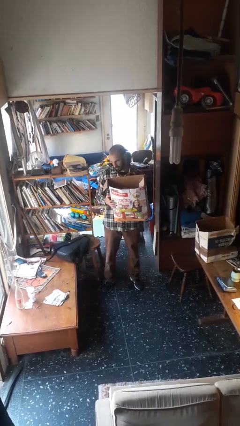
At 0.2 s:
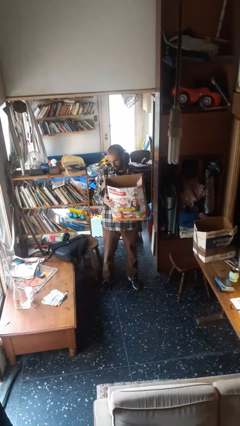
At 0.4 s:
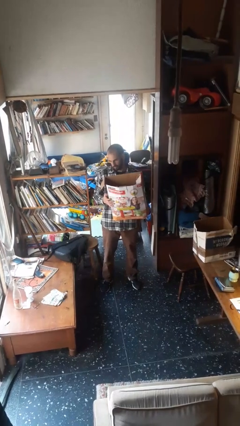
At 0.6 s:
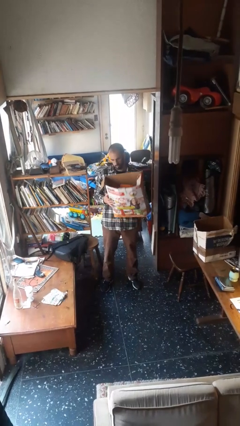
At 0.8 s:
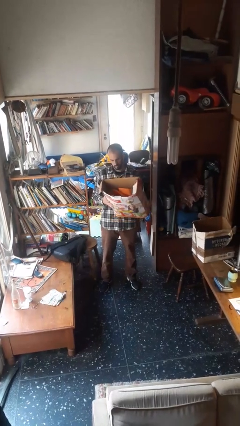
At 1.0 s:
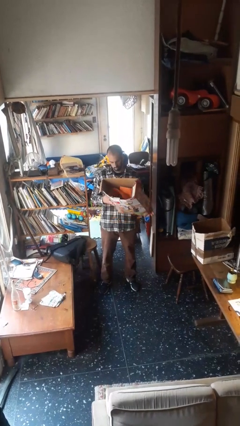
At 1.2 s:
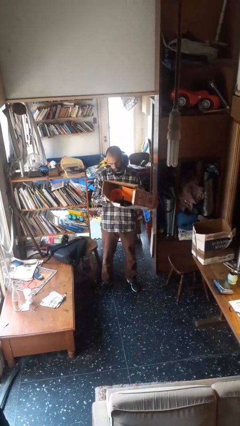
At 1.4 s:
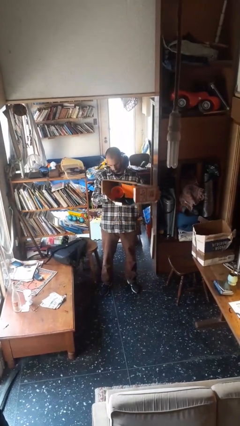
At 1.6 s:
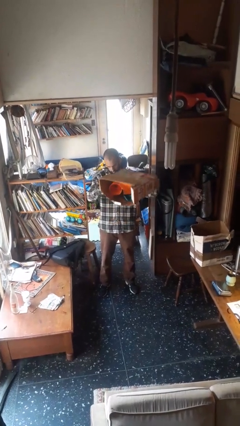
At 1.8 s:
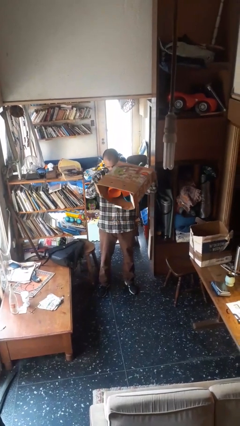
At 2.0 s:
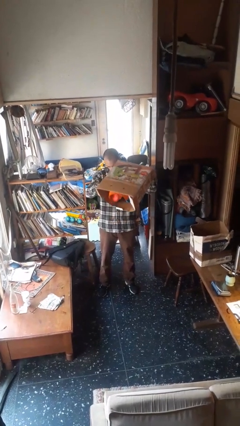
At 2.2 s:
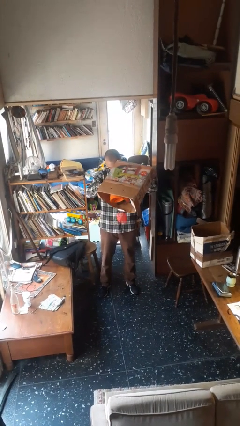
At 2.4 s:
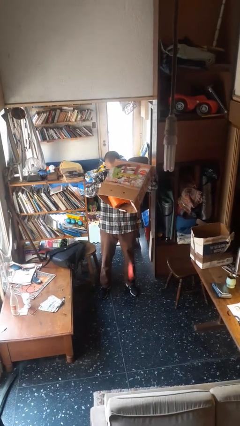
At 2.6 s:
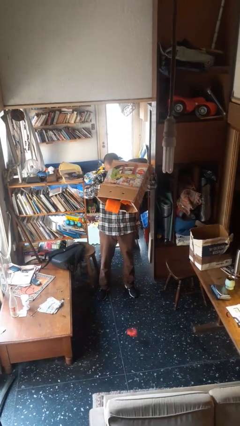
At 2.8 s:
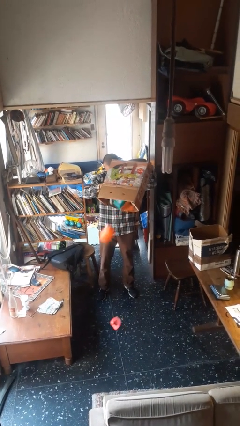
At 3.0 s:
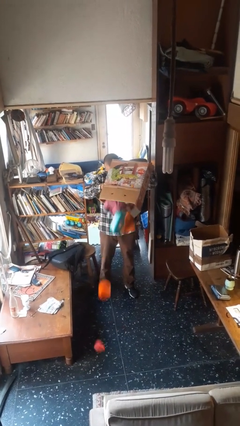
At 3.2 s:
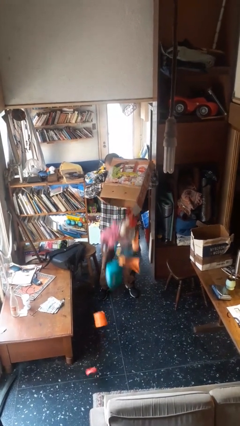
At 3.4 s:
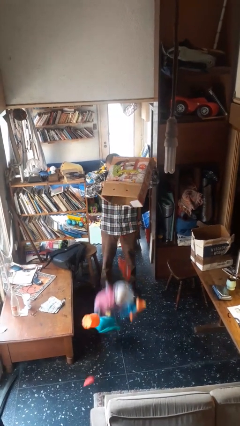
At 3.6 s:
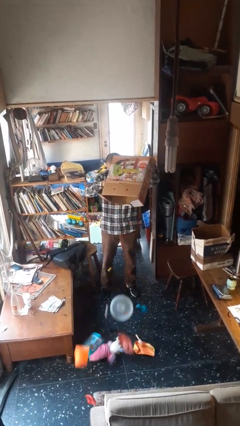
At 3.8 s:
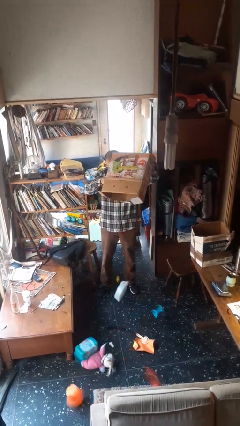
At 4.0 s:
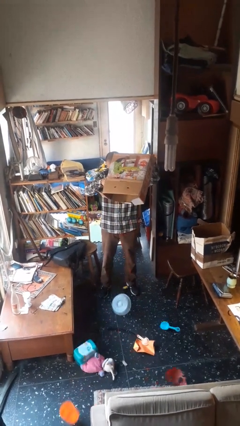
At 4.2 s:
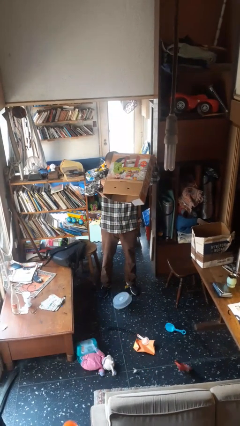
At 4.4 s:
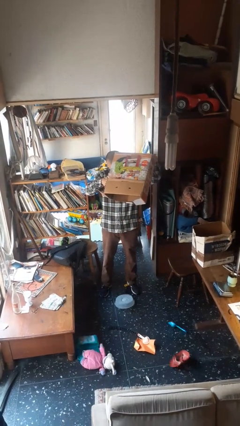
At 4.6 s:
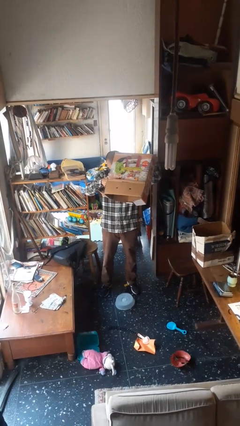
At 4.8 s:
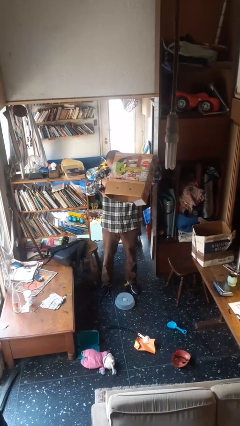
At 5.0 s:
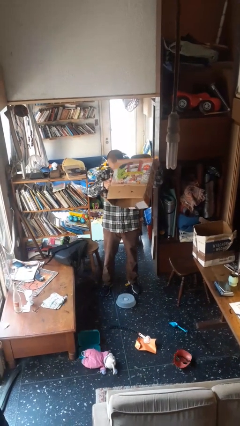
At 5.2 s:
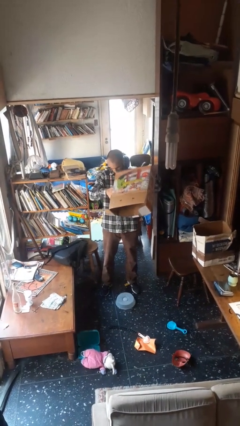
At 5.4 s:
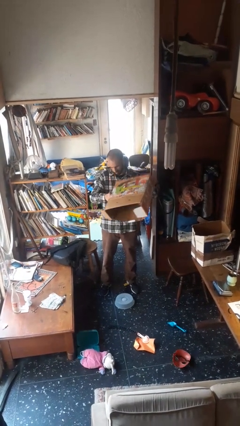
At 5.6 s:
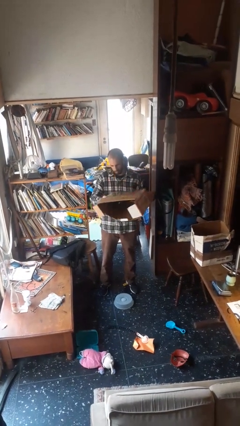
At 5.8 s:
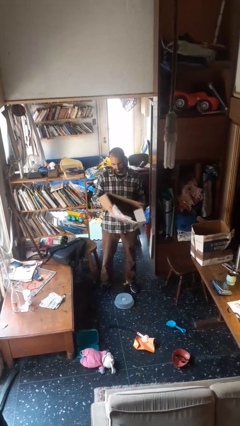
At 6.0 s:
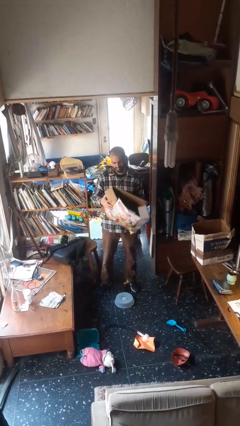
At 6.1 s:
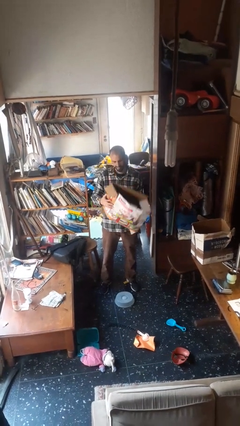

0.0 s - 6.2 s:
person unloads box onto floor

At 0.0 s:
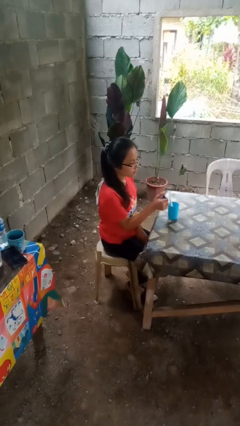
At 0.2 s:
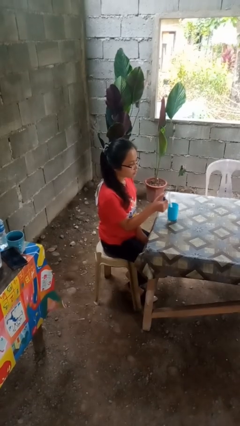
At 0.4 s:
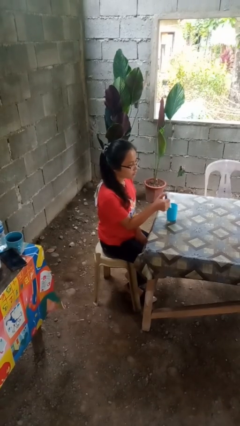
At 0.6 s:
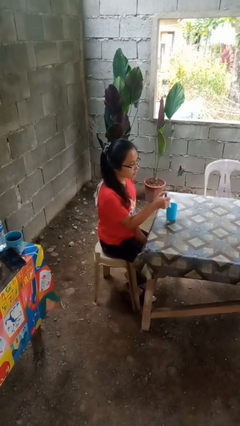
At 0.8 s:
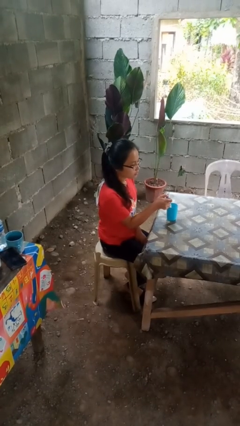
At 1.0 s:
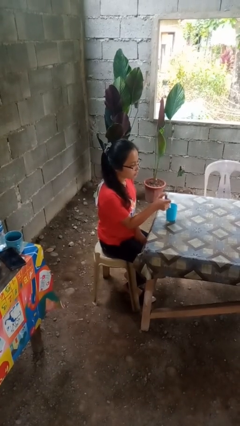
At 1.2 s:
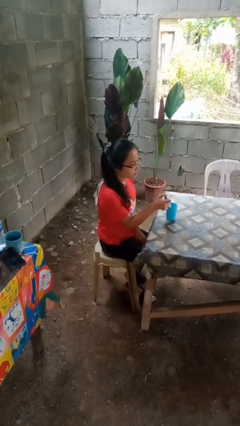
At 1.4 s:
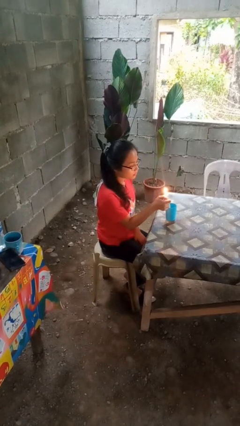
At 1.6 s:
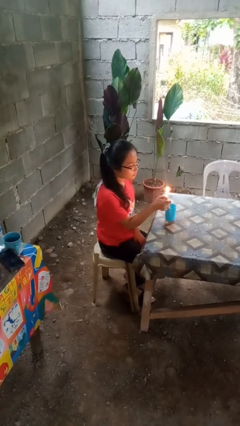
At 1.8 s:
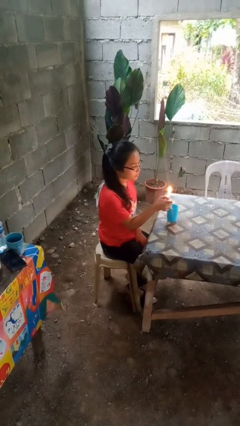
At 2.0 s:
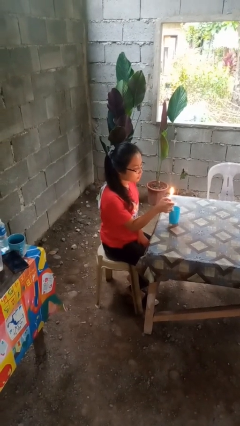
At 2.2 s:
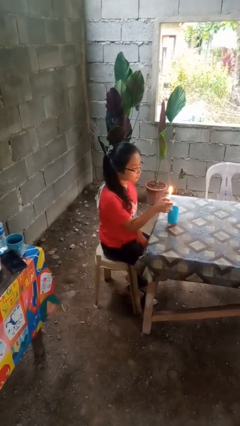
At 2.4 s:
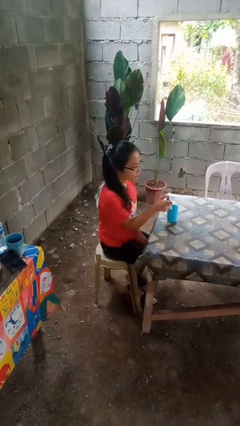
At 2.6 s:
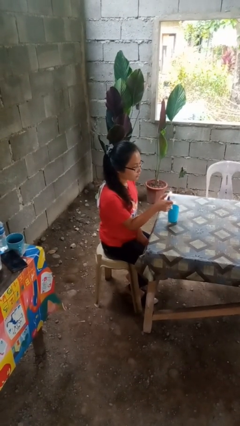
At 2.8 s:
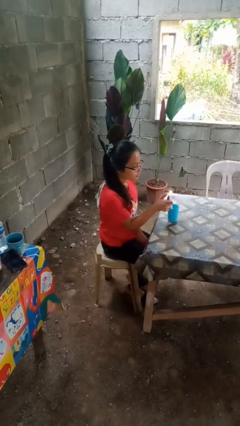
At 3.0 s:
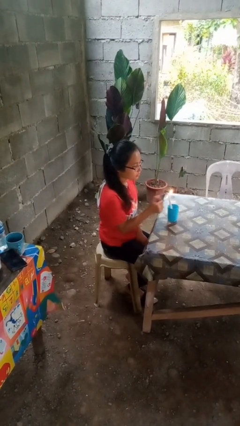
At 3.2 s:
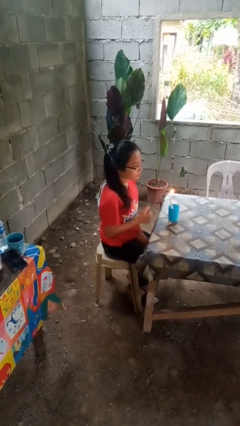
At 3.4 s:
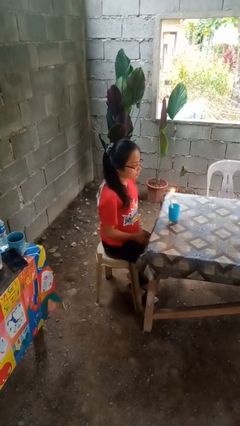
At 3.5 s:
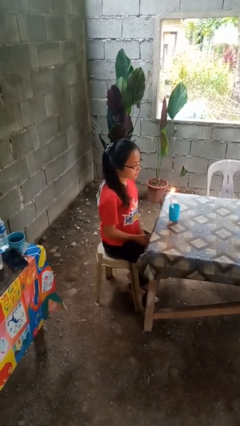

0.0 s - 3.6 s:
person lights candle

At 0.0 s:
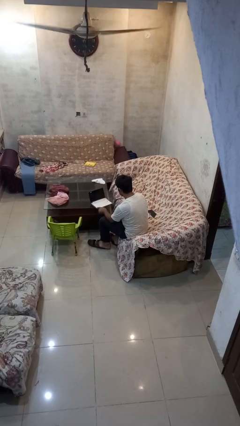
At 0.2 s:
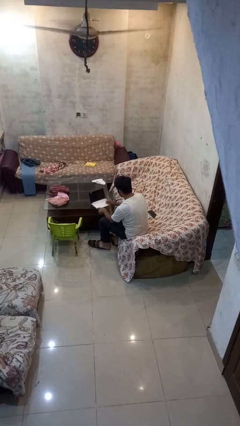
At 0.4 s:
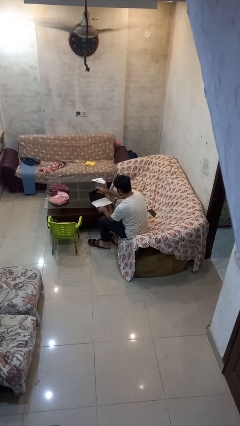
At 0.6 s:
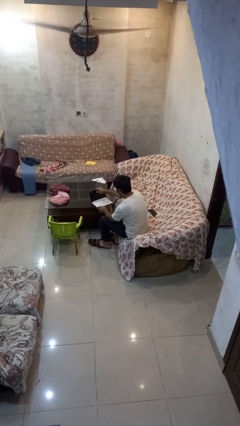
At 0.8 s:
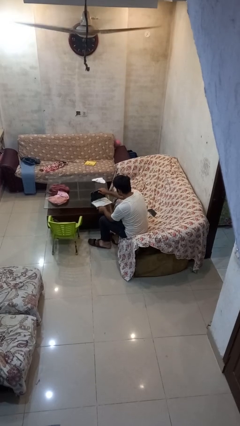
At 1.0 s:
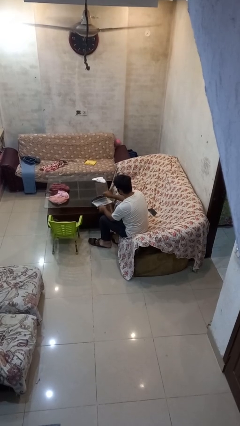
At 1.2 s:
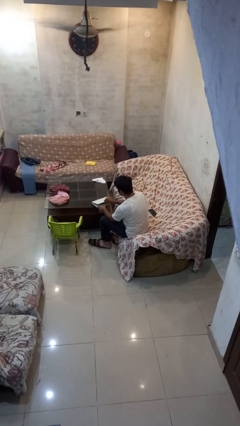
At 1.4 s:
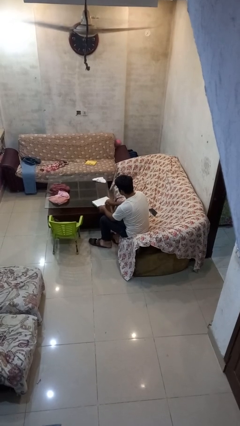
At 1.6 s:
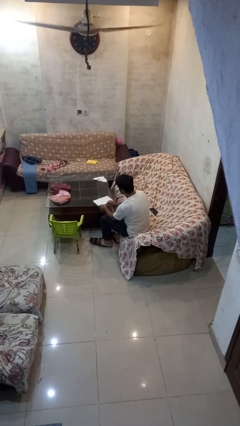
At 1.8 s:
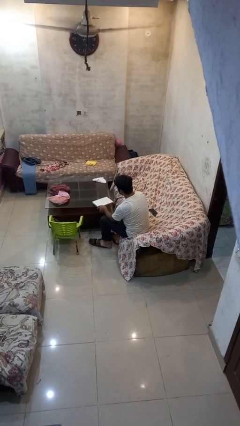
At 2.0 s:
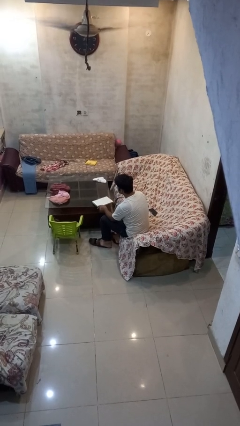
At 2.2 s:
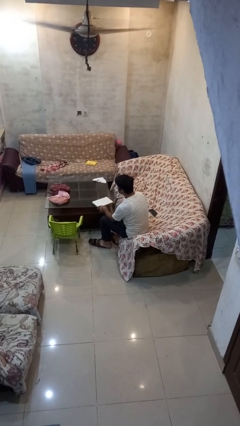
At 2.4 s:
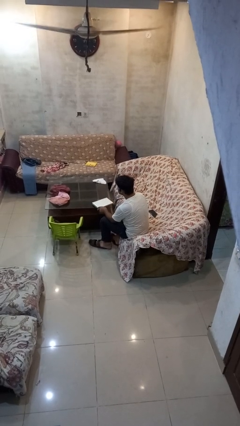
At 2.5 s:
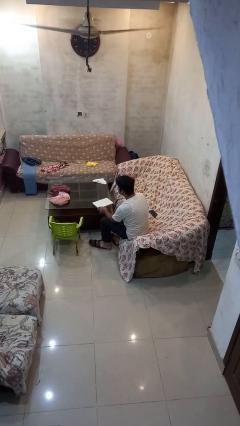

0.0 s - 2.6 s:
person closes laptop

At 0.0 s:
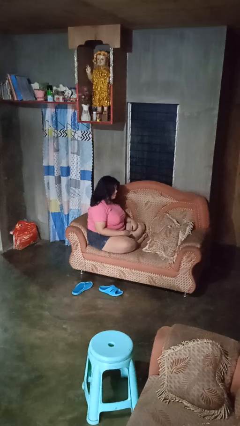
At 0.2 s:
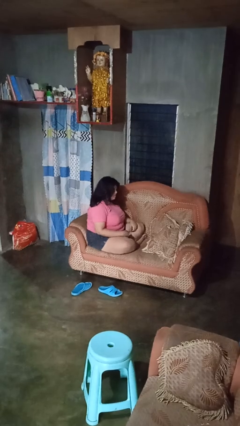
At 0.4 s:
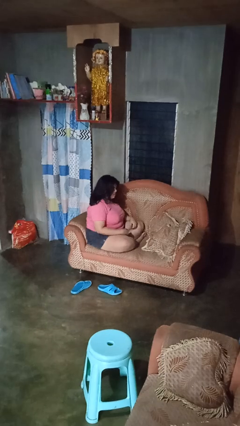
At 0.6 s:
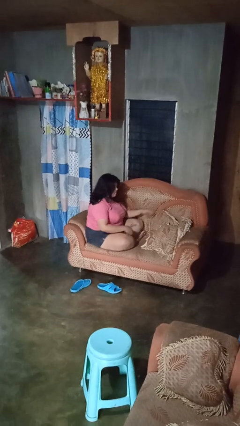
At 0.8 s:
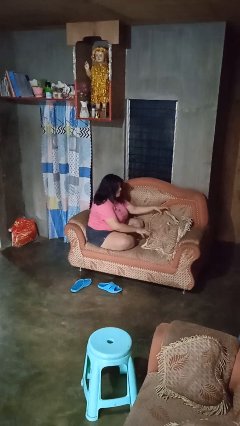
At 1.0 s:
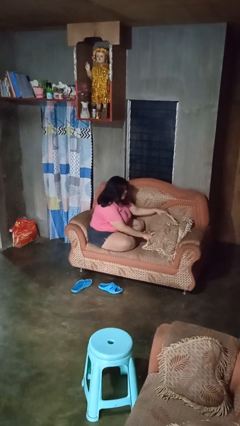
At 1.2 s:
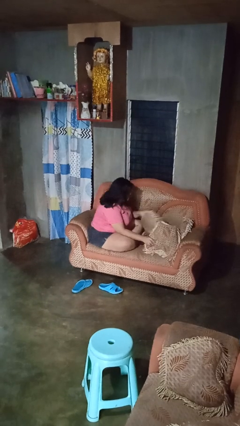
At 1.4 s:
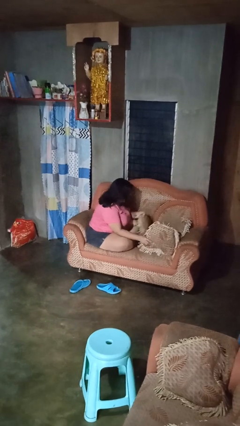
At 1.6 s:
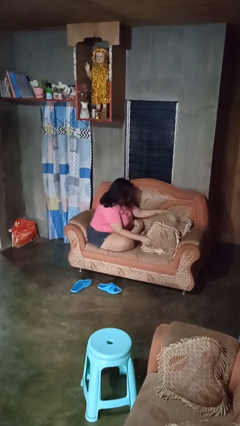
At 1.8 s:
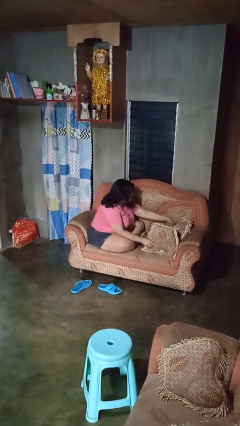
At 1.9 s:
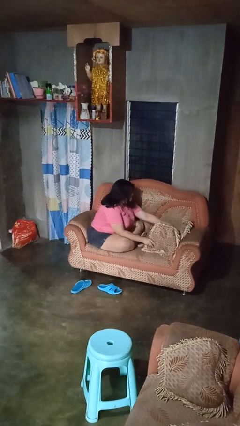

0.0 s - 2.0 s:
person searches in couch

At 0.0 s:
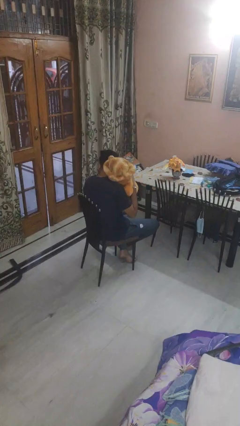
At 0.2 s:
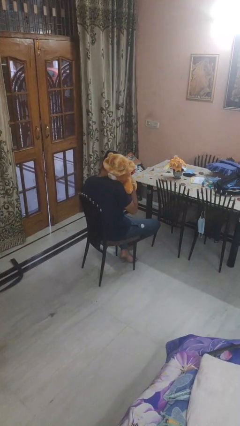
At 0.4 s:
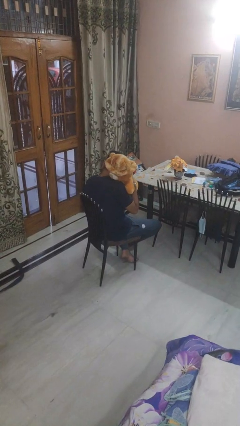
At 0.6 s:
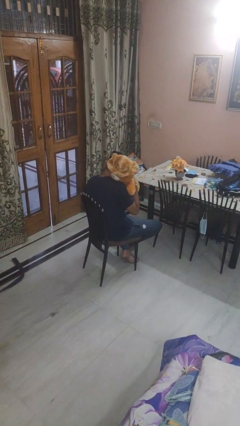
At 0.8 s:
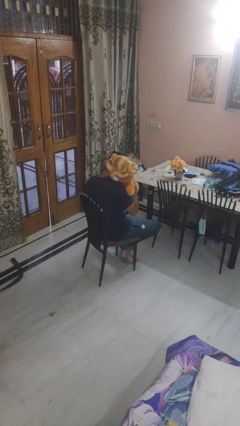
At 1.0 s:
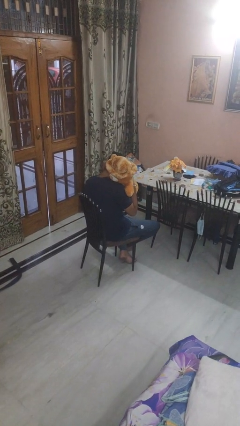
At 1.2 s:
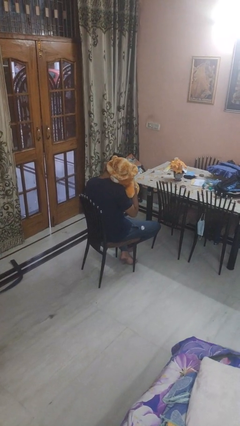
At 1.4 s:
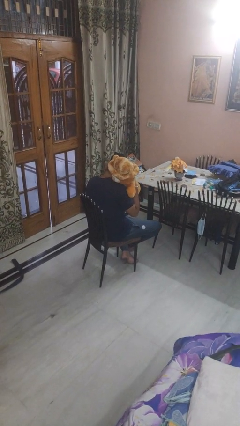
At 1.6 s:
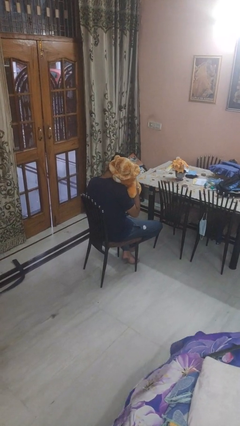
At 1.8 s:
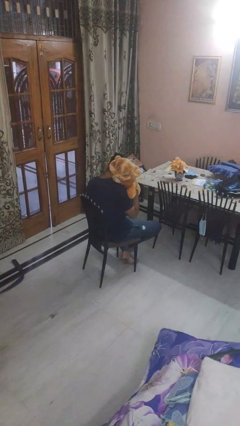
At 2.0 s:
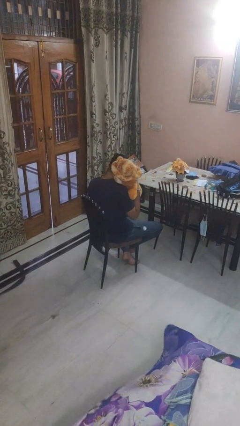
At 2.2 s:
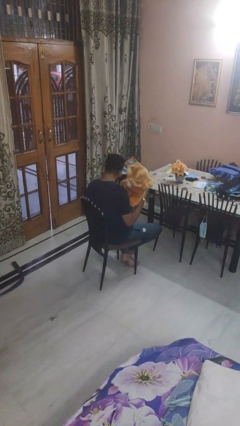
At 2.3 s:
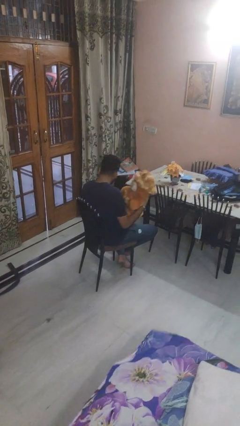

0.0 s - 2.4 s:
person hugs stuffed animal

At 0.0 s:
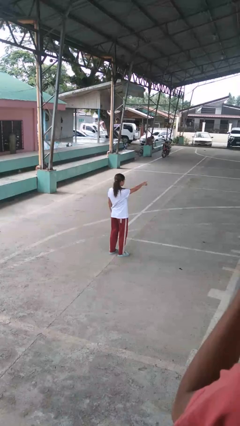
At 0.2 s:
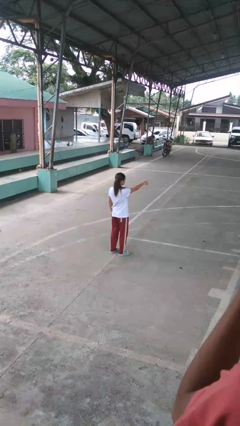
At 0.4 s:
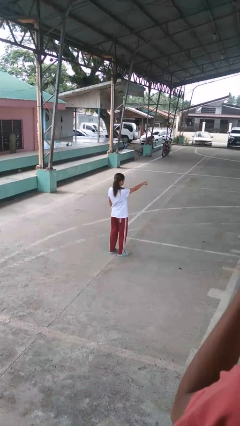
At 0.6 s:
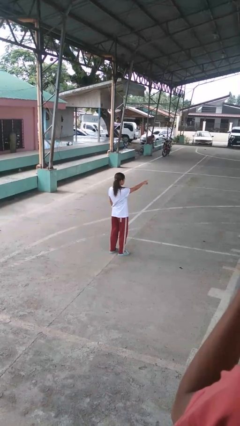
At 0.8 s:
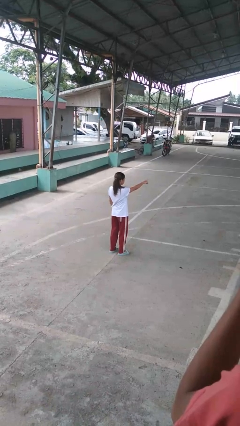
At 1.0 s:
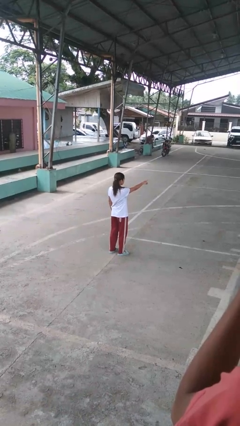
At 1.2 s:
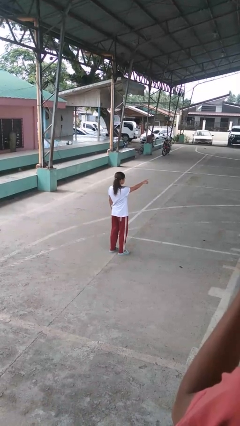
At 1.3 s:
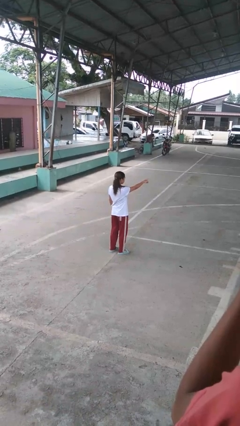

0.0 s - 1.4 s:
person points at person
